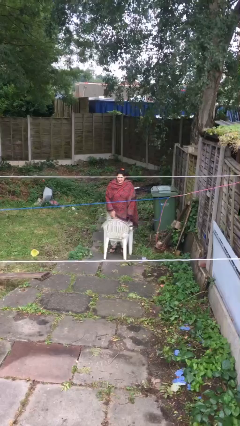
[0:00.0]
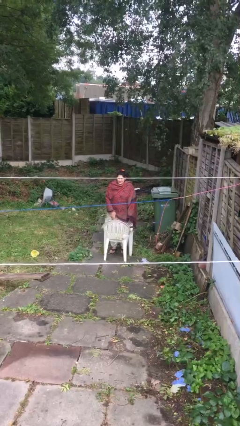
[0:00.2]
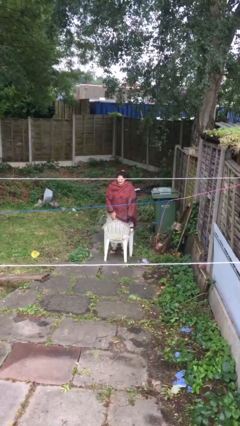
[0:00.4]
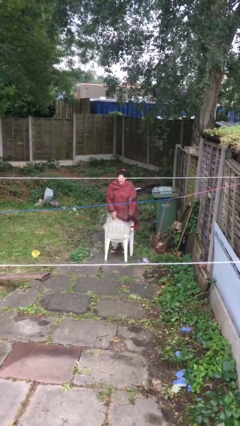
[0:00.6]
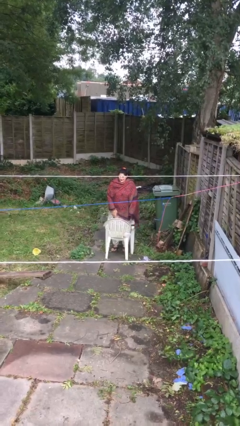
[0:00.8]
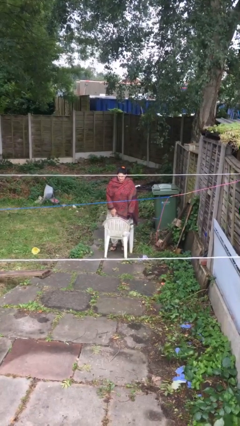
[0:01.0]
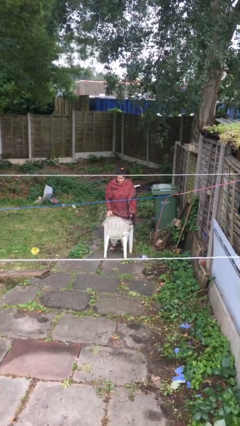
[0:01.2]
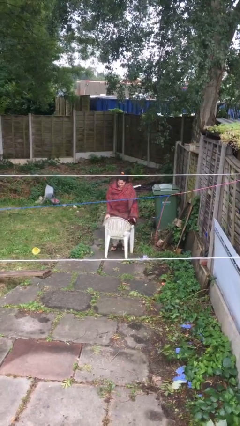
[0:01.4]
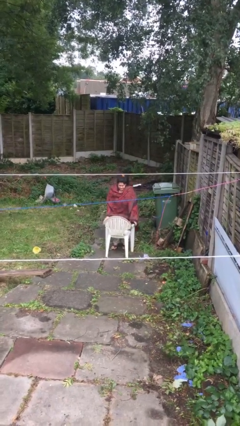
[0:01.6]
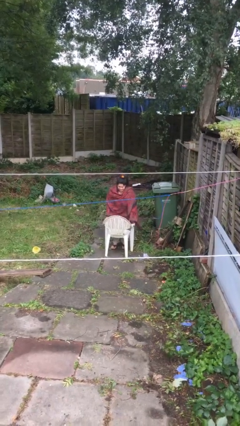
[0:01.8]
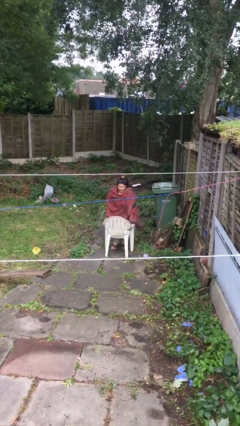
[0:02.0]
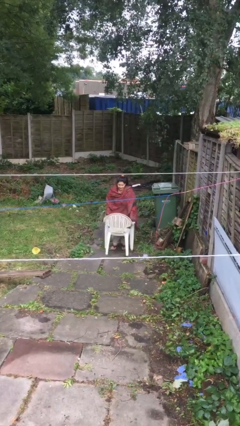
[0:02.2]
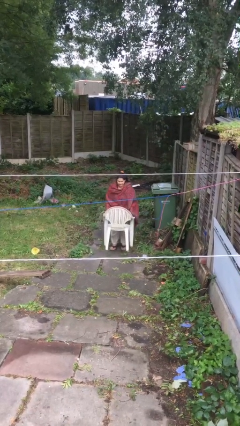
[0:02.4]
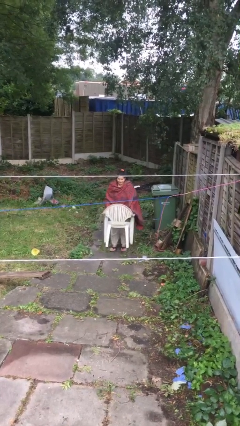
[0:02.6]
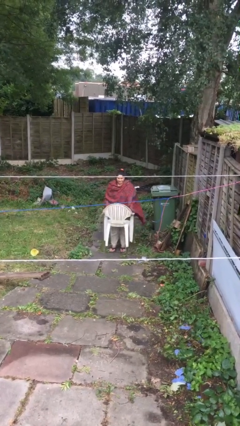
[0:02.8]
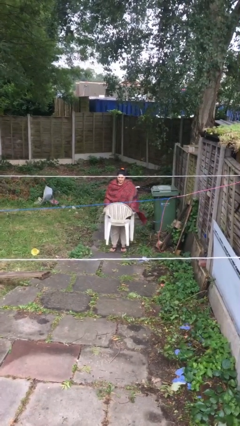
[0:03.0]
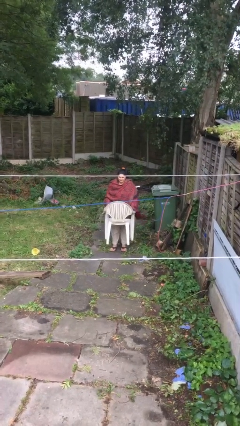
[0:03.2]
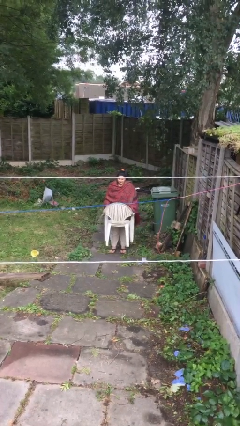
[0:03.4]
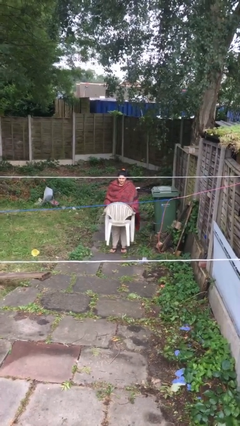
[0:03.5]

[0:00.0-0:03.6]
person picks up object from floor

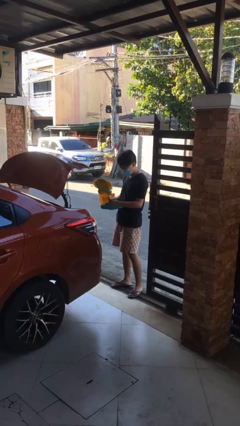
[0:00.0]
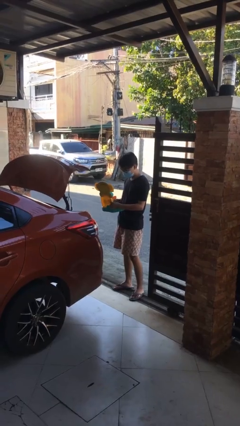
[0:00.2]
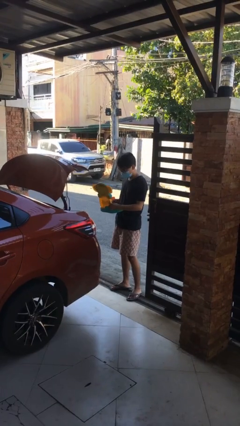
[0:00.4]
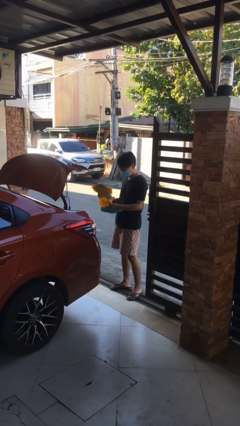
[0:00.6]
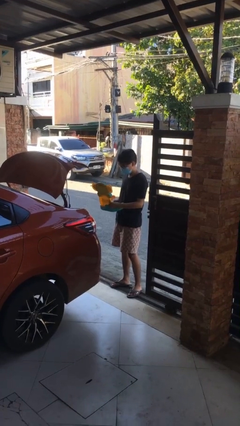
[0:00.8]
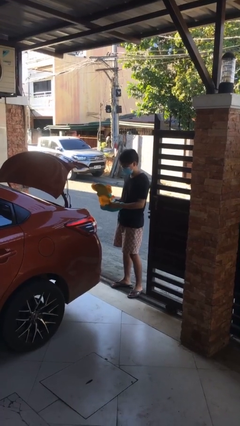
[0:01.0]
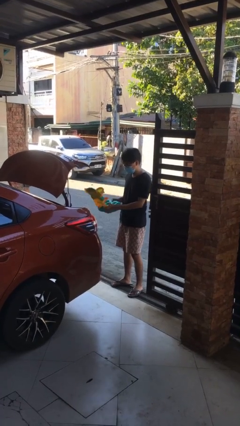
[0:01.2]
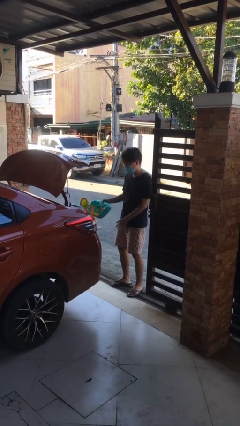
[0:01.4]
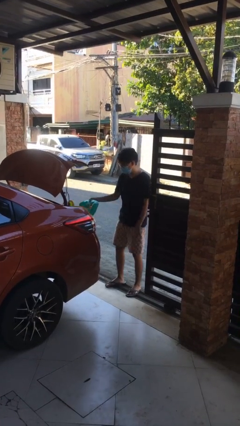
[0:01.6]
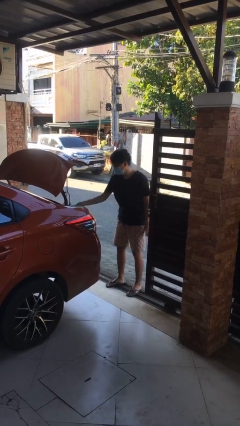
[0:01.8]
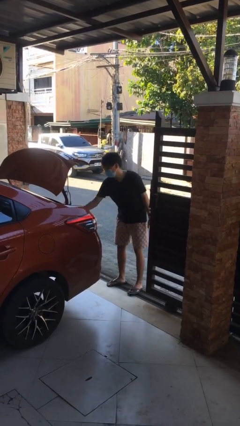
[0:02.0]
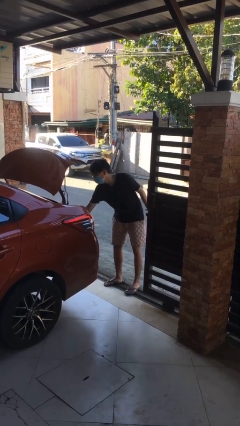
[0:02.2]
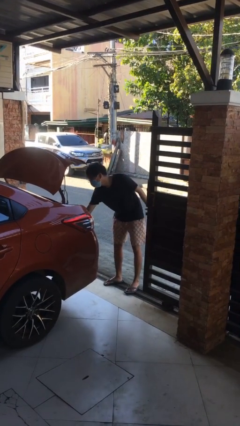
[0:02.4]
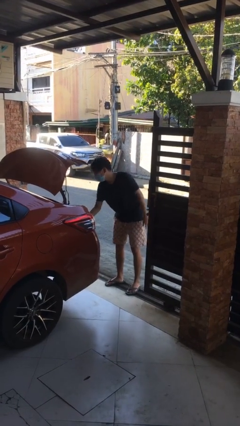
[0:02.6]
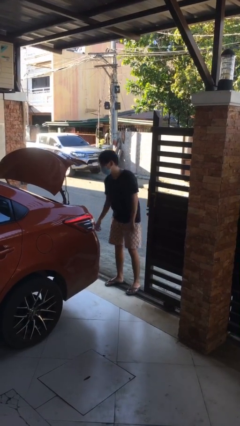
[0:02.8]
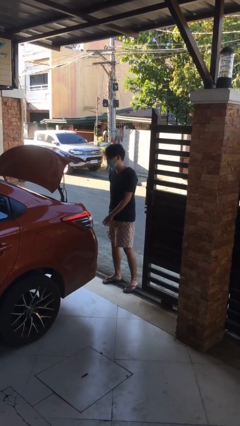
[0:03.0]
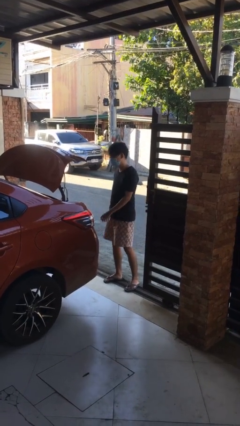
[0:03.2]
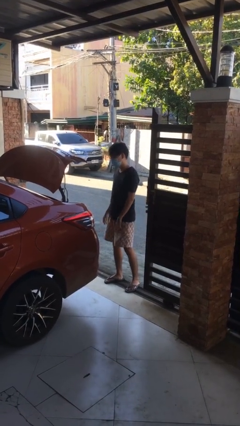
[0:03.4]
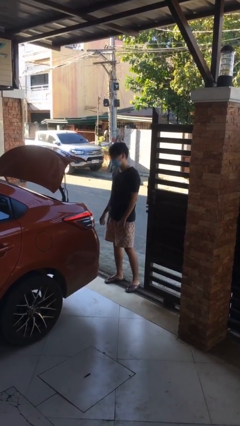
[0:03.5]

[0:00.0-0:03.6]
person loads car

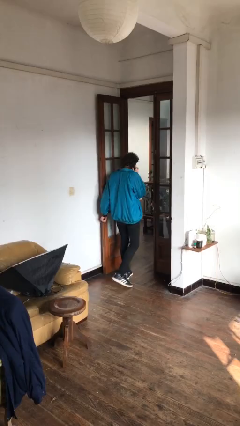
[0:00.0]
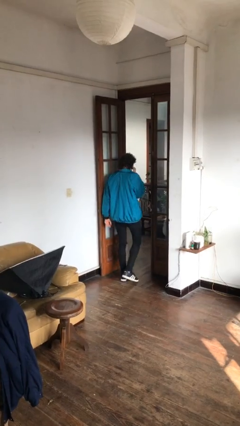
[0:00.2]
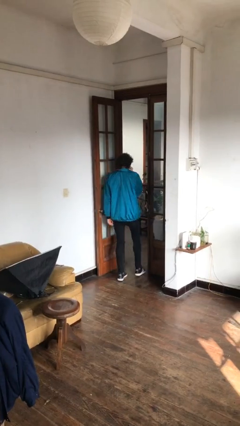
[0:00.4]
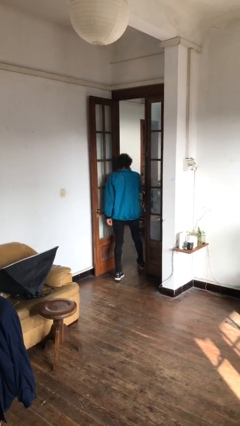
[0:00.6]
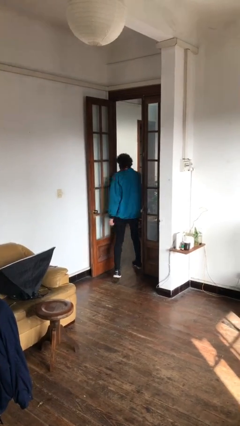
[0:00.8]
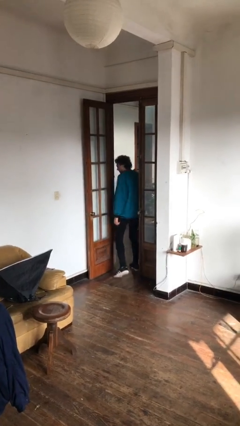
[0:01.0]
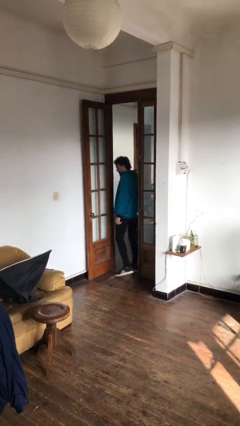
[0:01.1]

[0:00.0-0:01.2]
person exits scene through structure

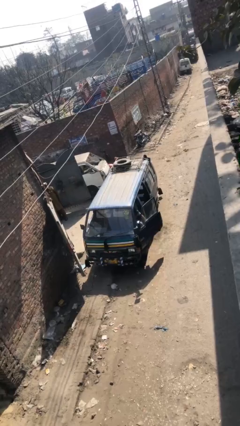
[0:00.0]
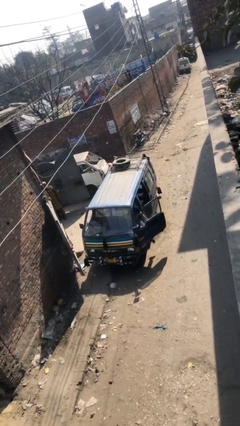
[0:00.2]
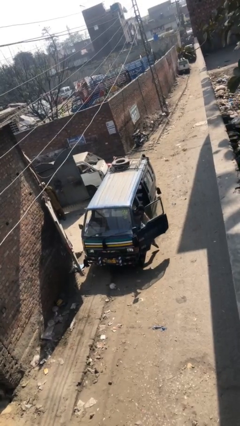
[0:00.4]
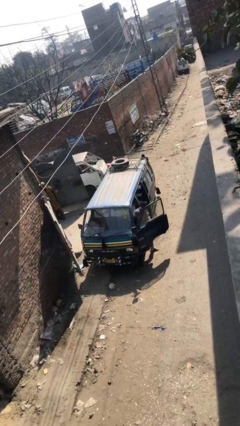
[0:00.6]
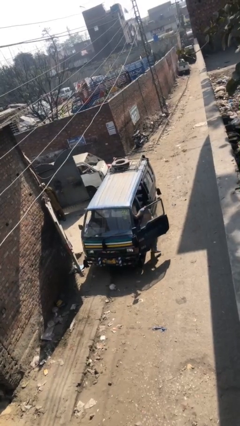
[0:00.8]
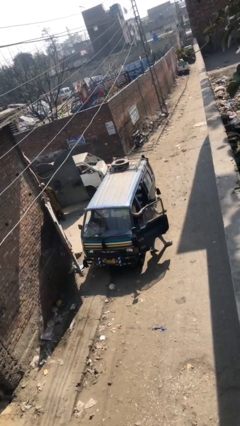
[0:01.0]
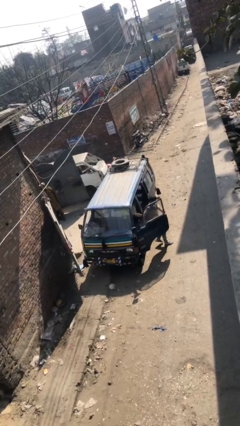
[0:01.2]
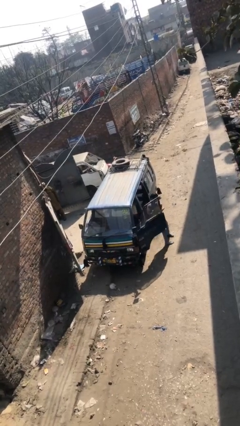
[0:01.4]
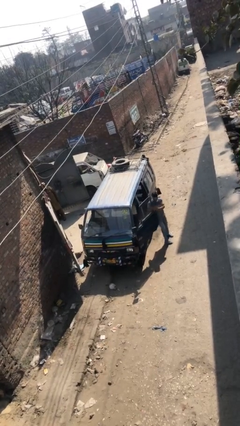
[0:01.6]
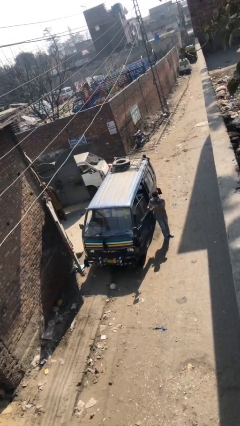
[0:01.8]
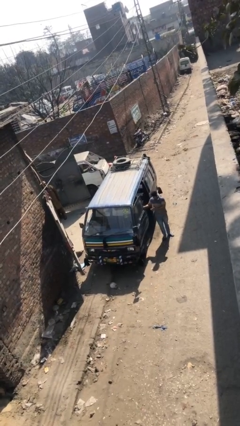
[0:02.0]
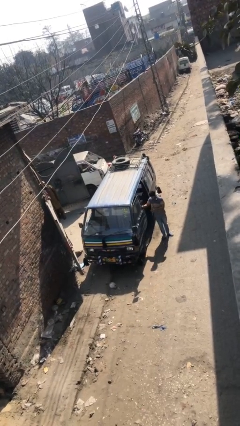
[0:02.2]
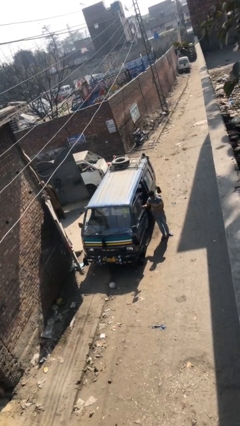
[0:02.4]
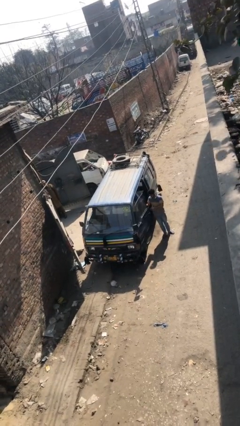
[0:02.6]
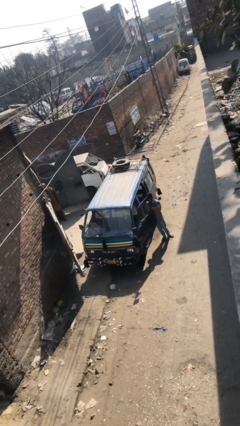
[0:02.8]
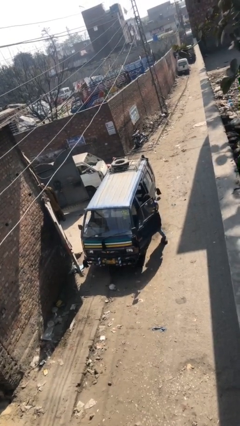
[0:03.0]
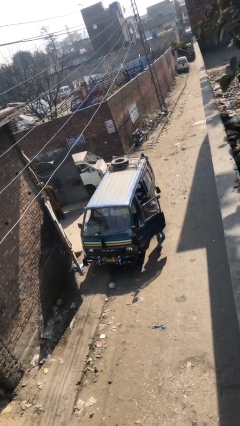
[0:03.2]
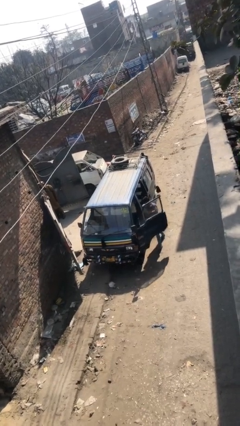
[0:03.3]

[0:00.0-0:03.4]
car drops off person

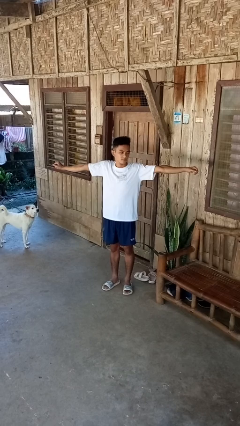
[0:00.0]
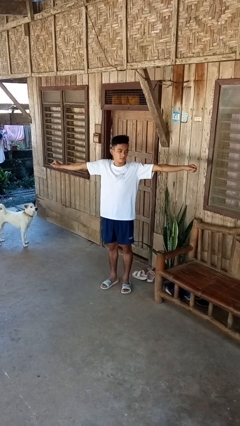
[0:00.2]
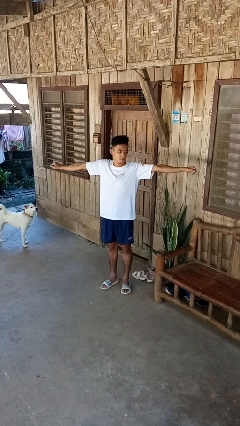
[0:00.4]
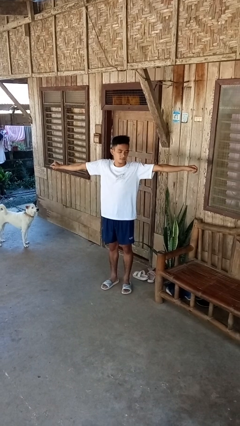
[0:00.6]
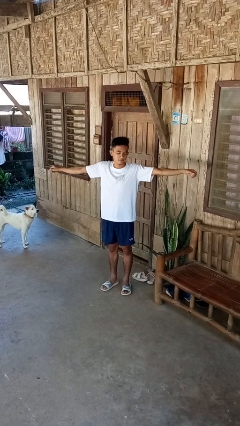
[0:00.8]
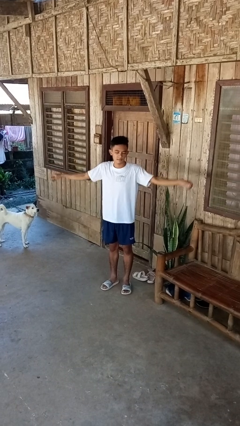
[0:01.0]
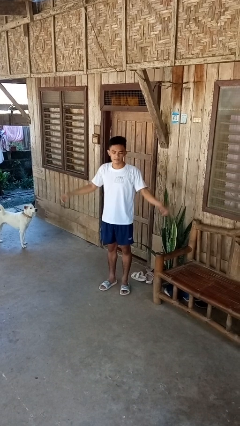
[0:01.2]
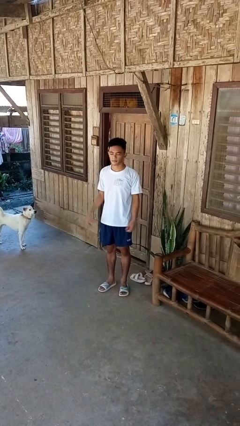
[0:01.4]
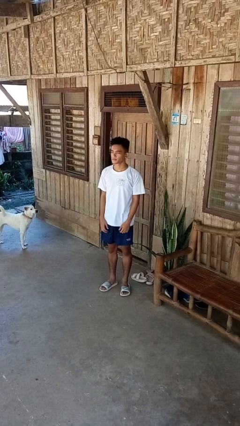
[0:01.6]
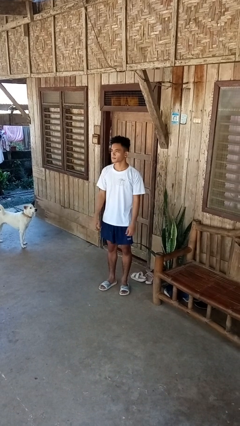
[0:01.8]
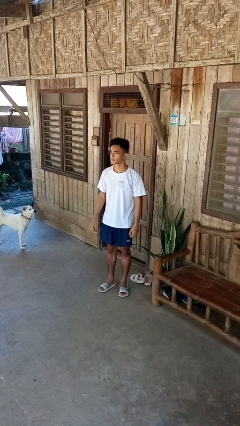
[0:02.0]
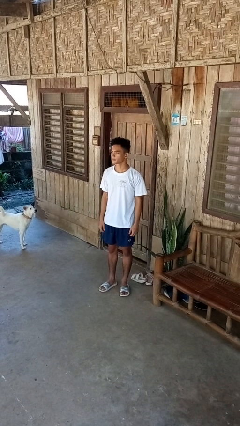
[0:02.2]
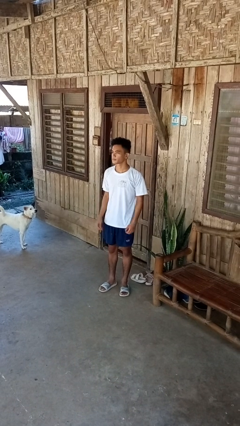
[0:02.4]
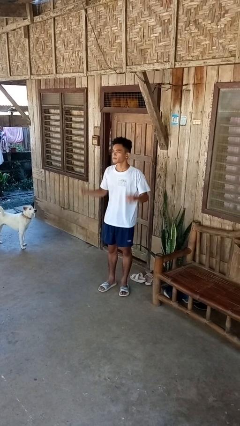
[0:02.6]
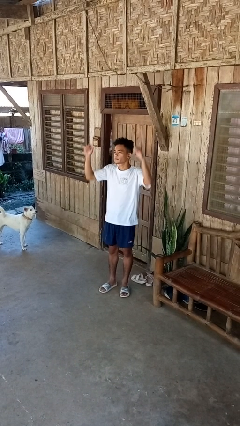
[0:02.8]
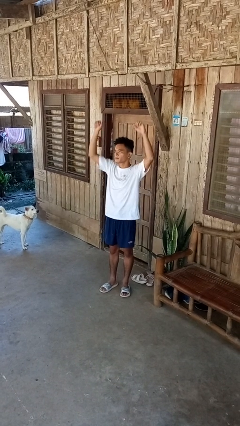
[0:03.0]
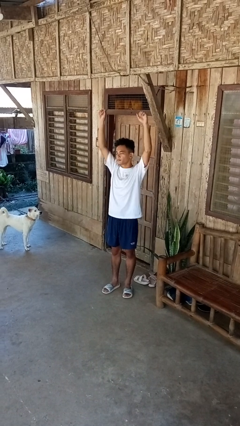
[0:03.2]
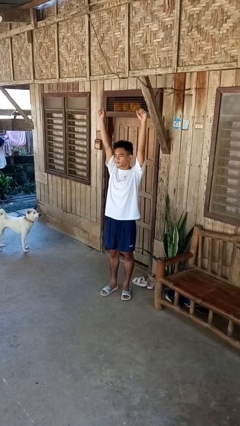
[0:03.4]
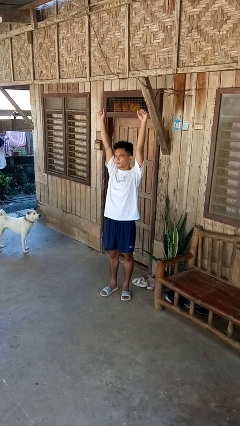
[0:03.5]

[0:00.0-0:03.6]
person stretches arms to side

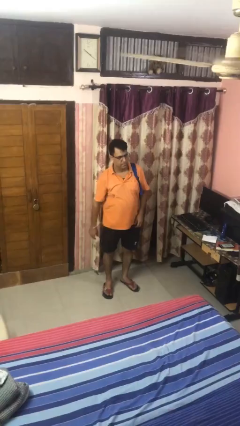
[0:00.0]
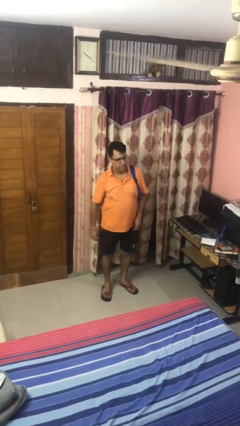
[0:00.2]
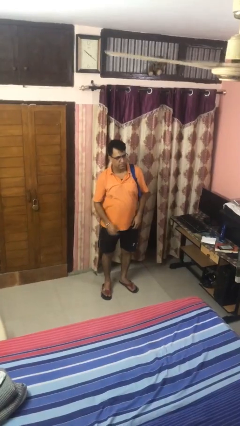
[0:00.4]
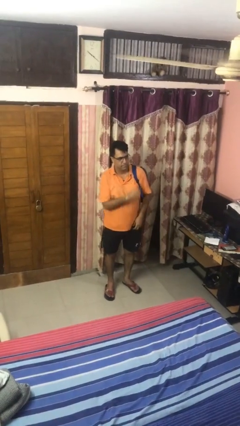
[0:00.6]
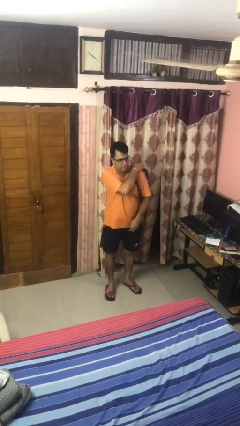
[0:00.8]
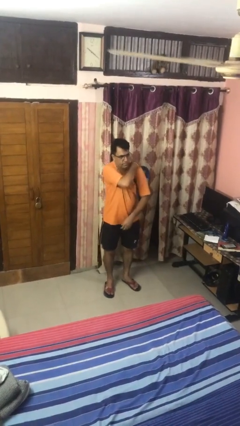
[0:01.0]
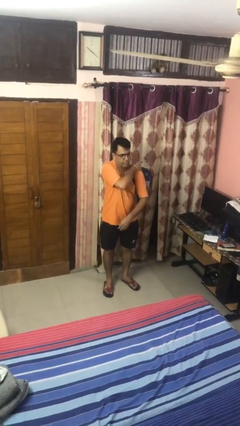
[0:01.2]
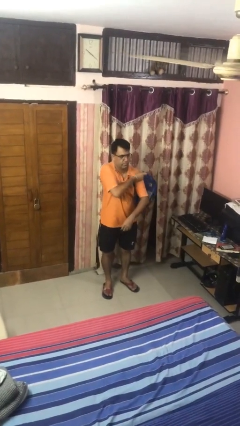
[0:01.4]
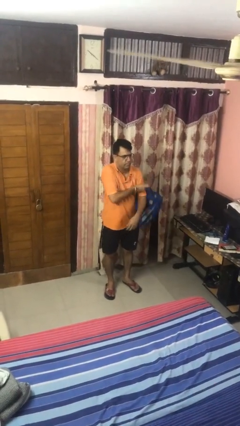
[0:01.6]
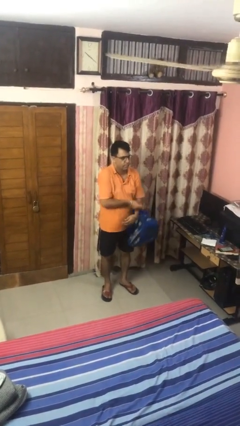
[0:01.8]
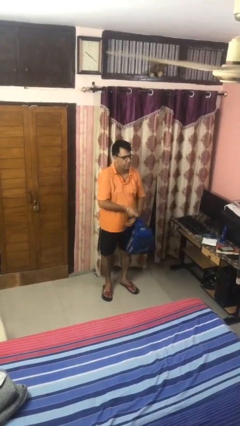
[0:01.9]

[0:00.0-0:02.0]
person takes off backpack
